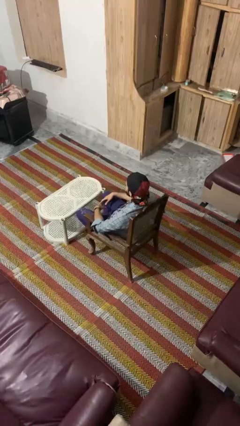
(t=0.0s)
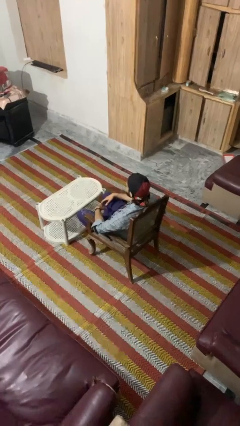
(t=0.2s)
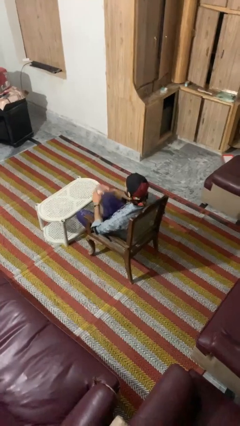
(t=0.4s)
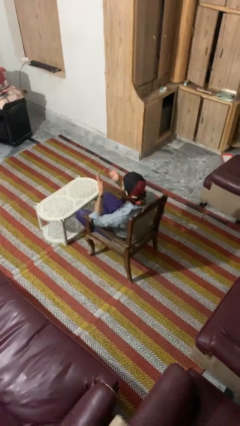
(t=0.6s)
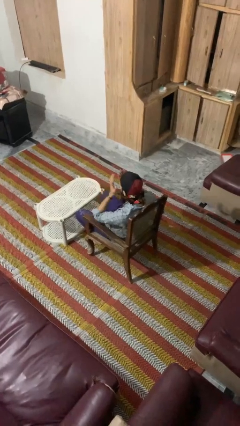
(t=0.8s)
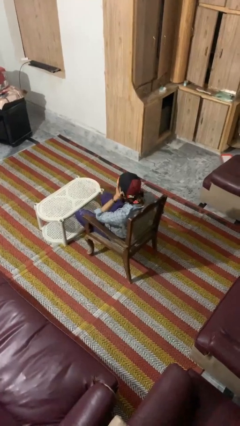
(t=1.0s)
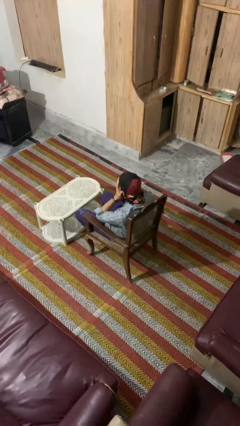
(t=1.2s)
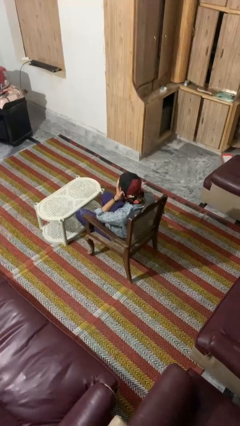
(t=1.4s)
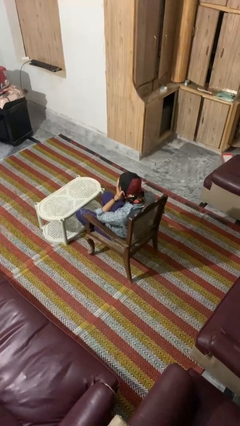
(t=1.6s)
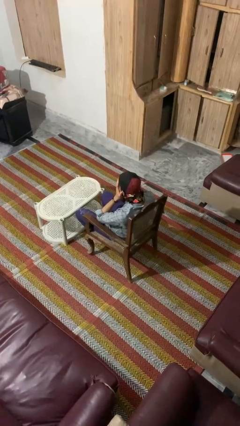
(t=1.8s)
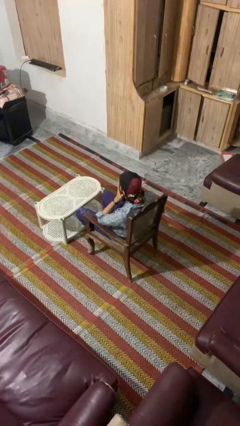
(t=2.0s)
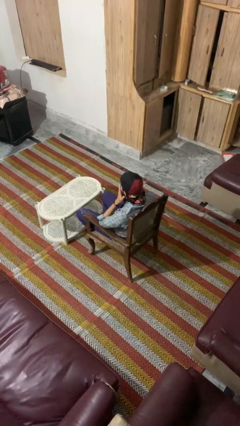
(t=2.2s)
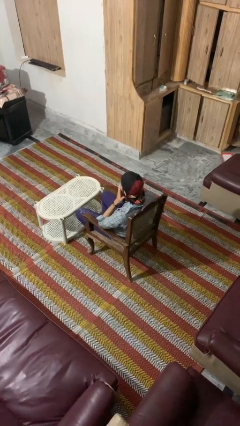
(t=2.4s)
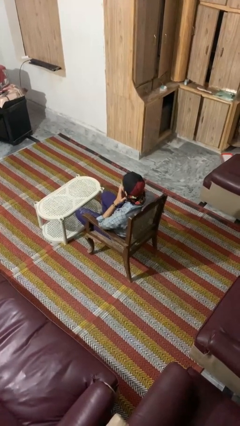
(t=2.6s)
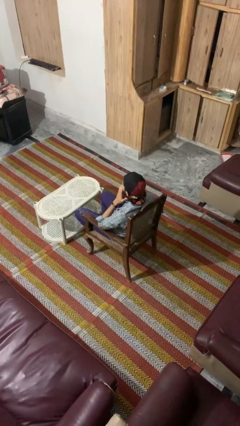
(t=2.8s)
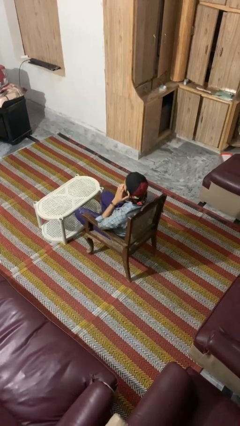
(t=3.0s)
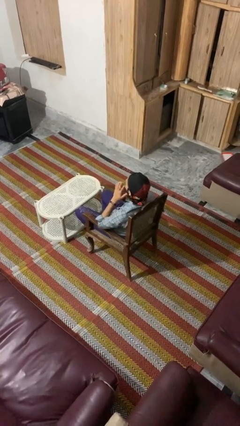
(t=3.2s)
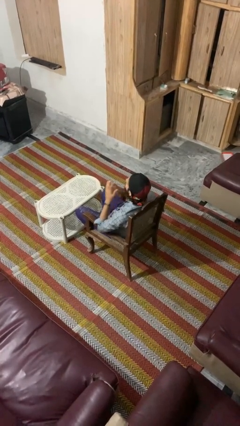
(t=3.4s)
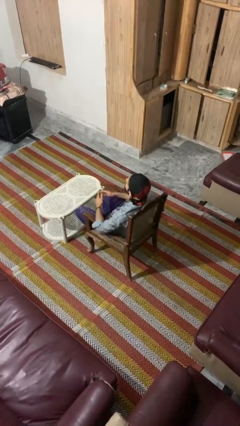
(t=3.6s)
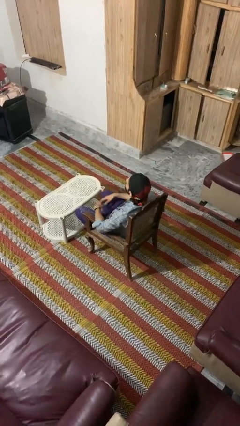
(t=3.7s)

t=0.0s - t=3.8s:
person covers face with hands

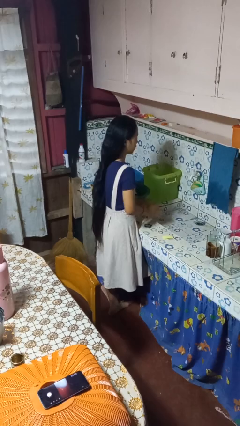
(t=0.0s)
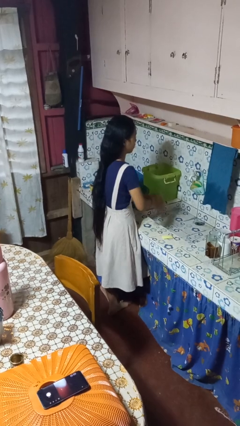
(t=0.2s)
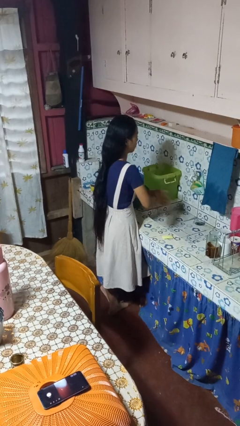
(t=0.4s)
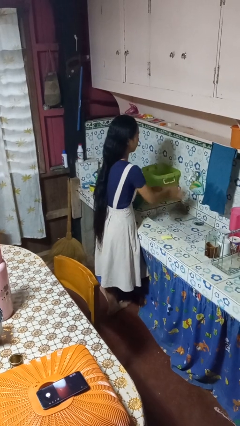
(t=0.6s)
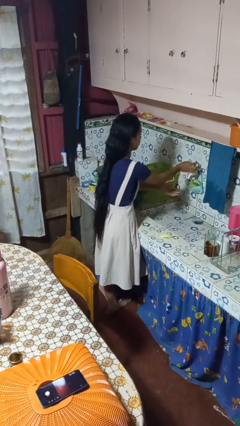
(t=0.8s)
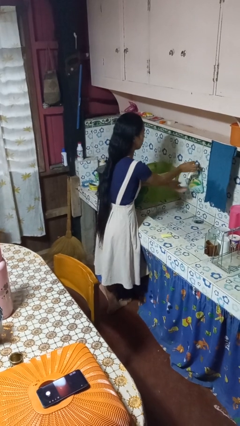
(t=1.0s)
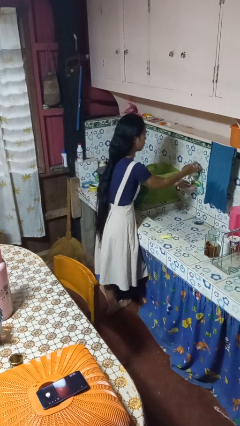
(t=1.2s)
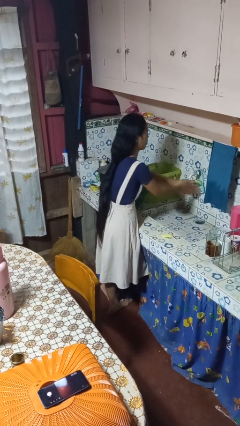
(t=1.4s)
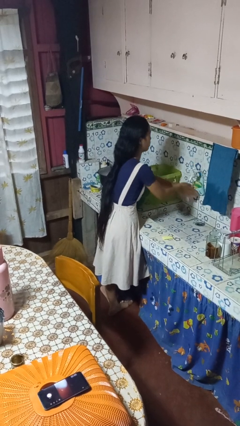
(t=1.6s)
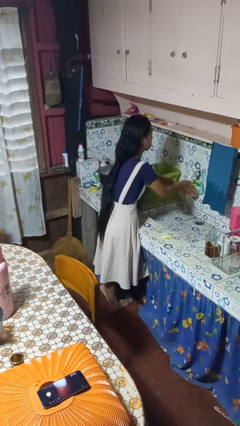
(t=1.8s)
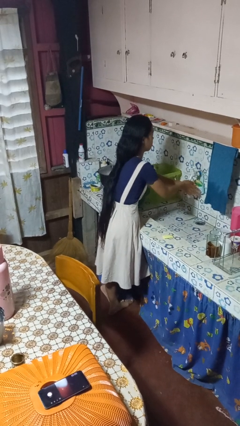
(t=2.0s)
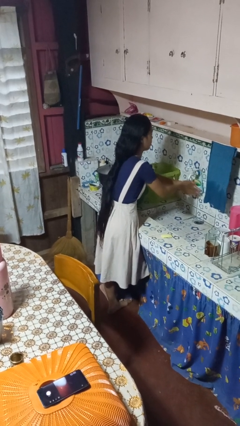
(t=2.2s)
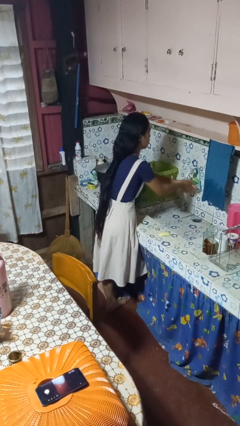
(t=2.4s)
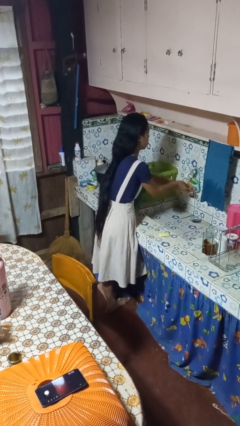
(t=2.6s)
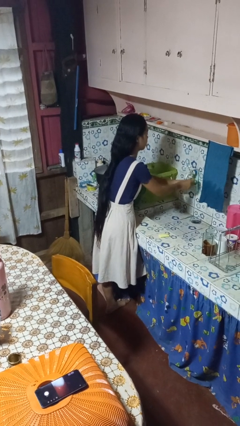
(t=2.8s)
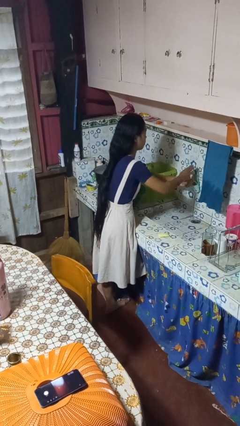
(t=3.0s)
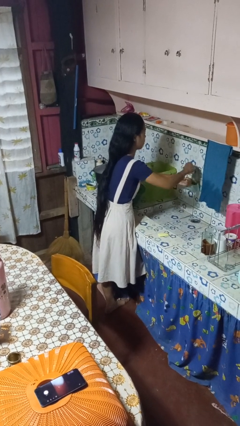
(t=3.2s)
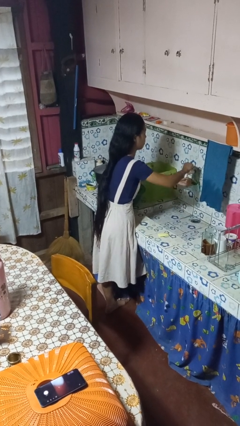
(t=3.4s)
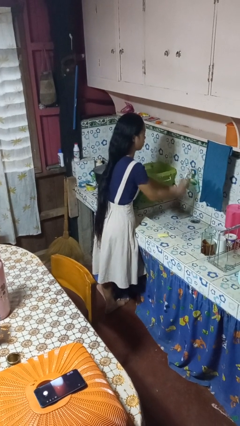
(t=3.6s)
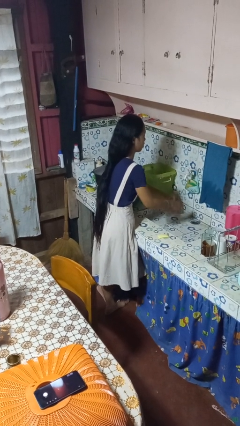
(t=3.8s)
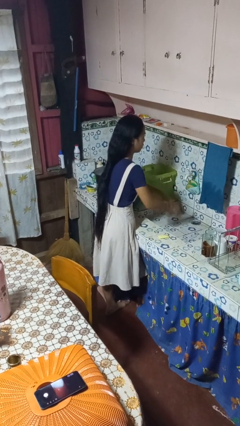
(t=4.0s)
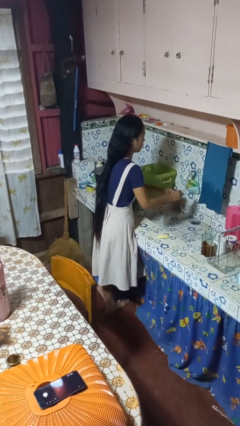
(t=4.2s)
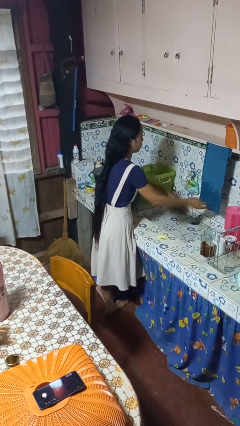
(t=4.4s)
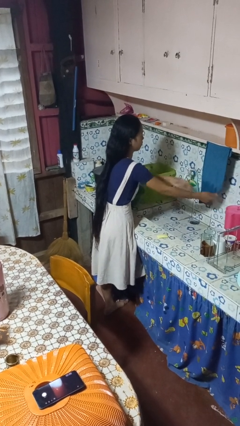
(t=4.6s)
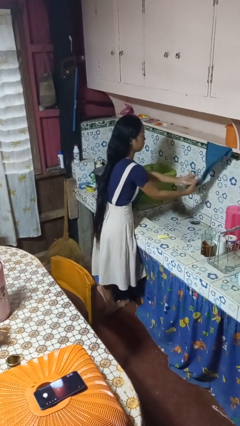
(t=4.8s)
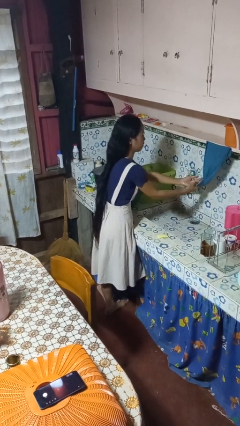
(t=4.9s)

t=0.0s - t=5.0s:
person washes hands

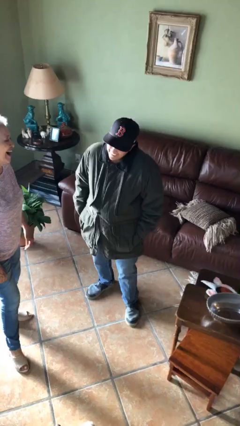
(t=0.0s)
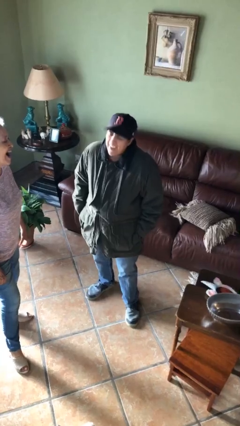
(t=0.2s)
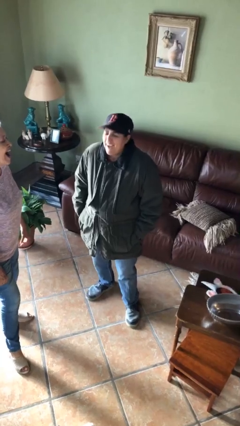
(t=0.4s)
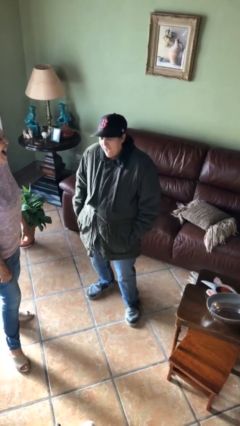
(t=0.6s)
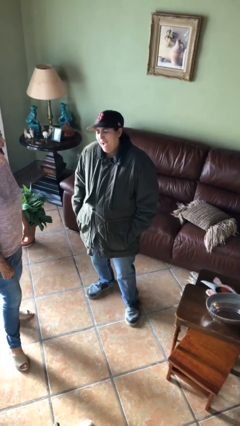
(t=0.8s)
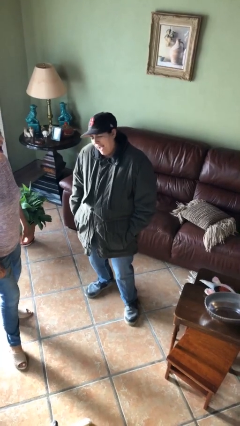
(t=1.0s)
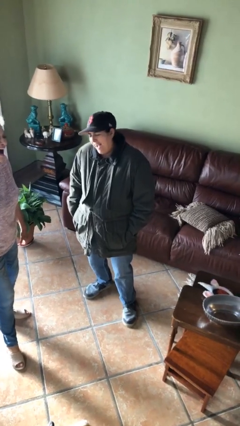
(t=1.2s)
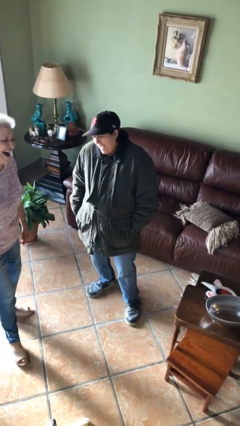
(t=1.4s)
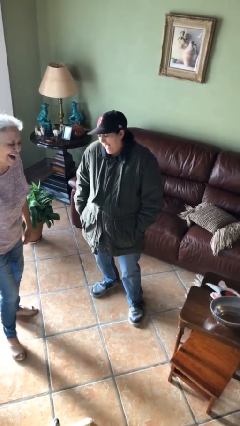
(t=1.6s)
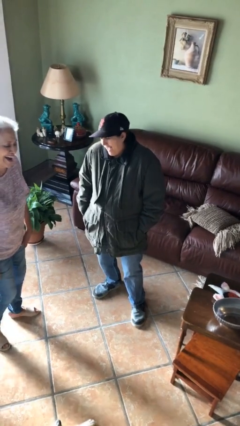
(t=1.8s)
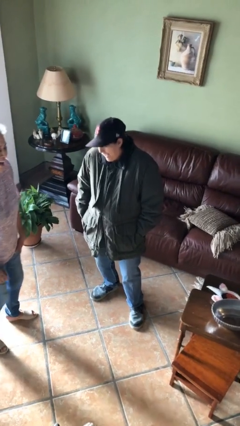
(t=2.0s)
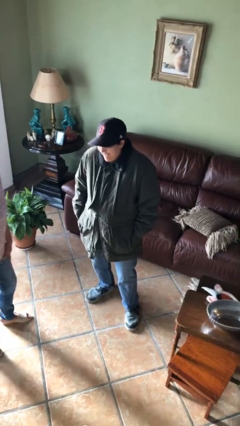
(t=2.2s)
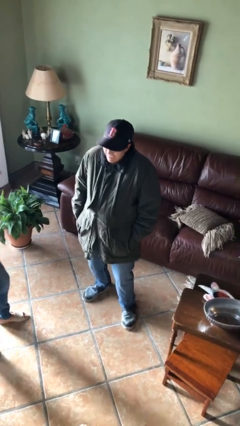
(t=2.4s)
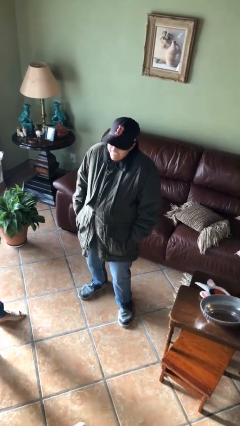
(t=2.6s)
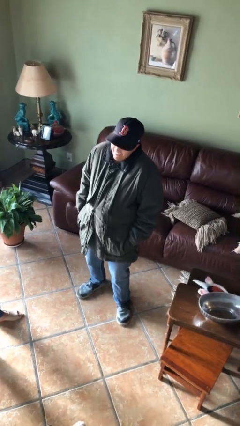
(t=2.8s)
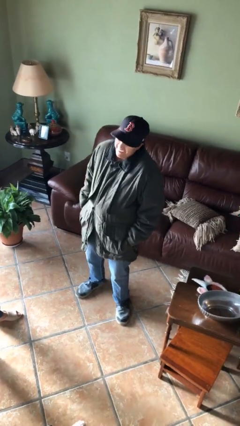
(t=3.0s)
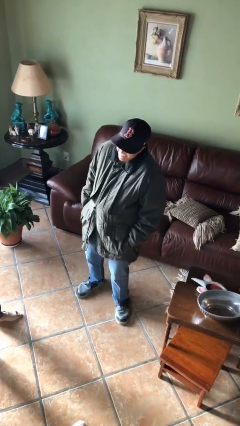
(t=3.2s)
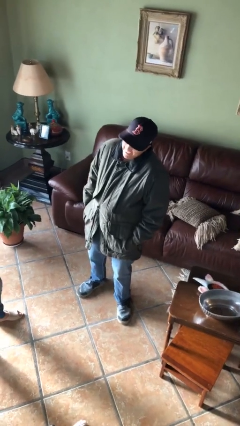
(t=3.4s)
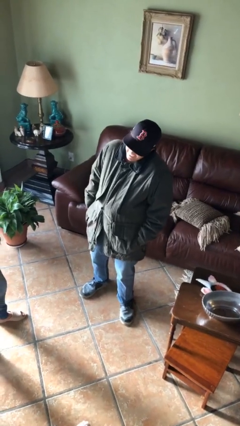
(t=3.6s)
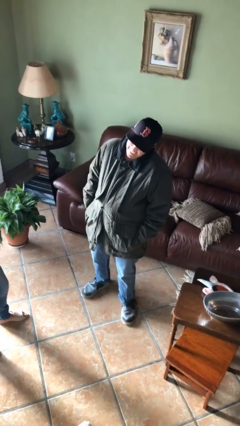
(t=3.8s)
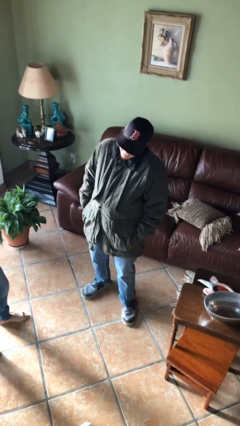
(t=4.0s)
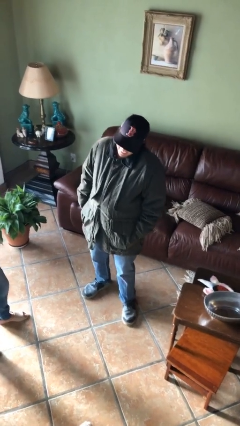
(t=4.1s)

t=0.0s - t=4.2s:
person laughs with person

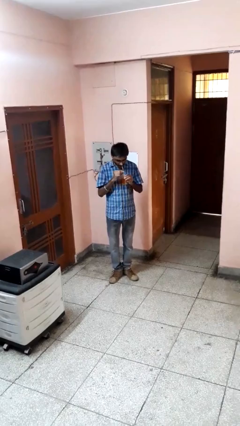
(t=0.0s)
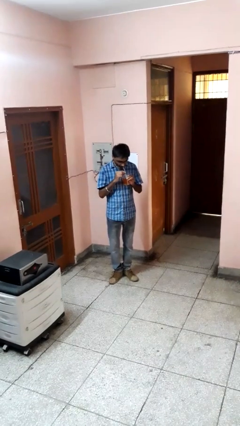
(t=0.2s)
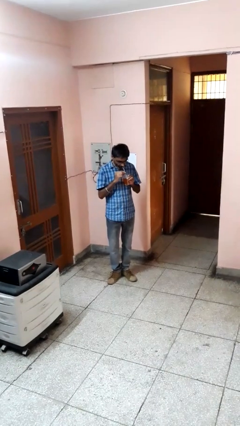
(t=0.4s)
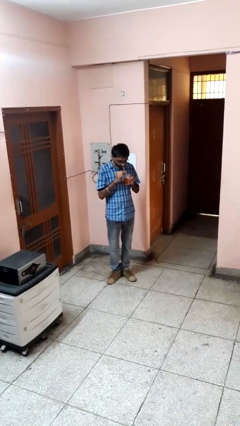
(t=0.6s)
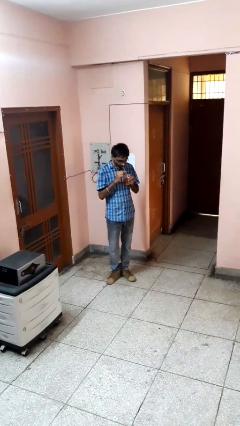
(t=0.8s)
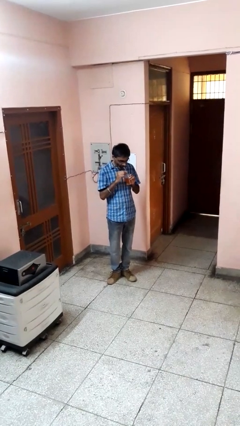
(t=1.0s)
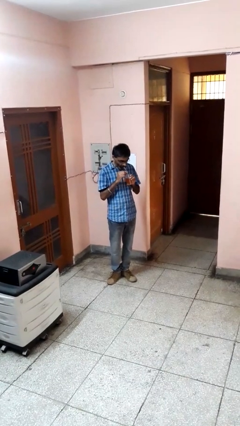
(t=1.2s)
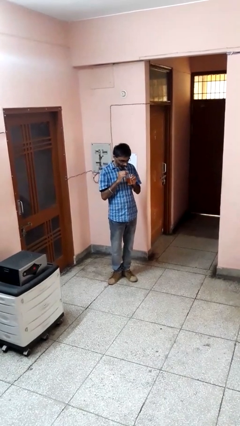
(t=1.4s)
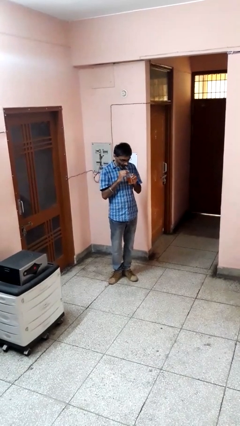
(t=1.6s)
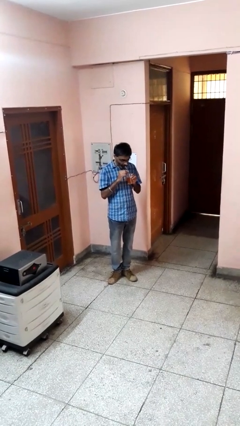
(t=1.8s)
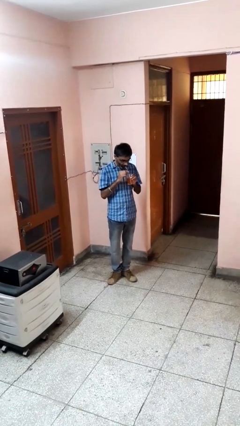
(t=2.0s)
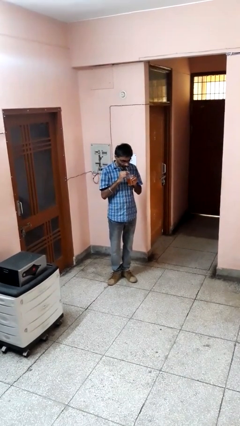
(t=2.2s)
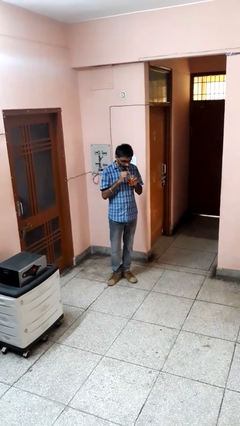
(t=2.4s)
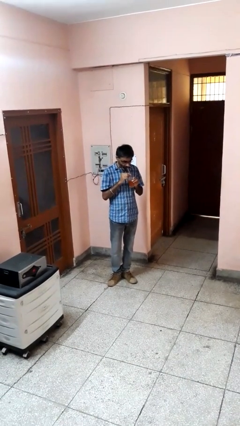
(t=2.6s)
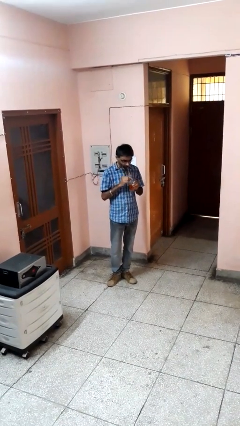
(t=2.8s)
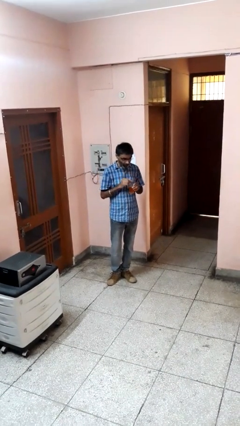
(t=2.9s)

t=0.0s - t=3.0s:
person drinks from straw

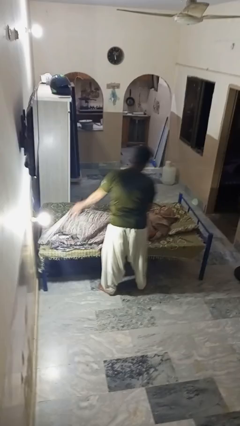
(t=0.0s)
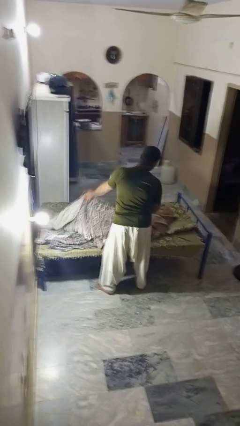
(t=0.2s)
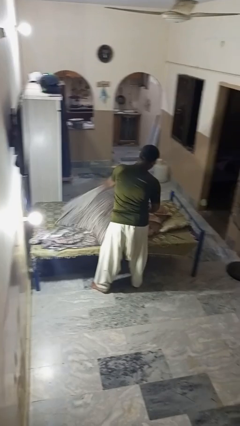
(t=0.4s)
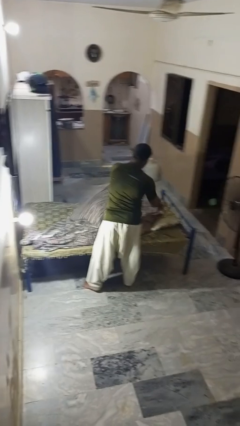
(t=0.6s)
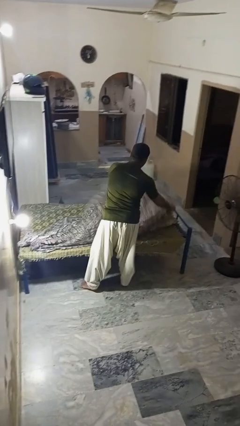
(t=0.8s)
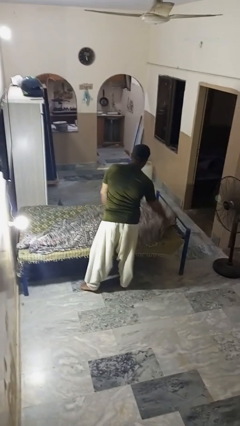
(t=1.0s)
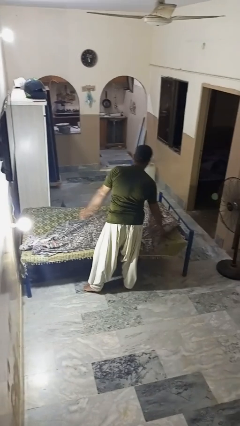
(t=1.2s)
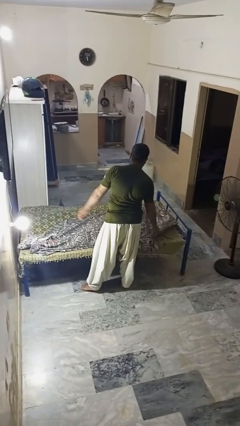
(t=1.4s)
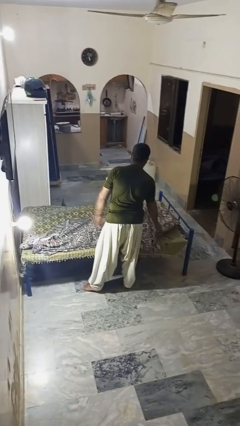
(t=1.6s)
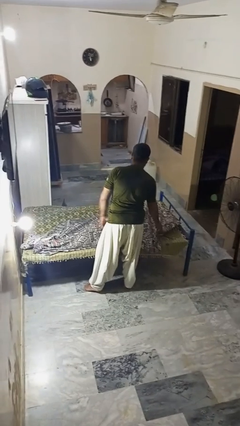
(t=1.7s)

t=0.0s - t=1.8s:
person covers friend with blanket
